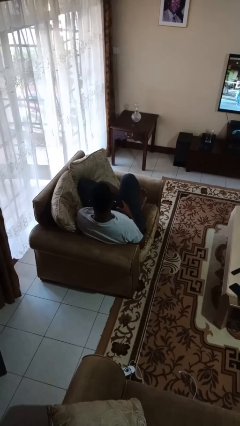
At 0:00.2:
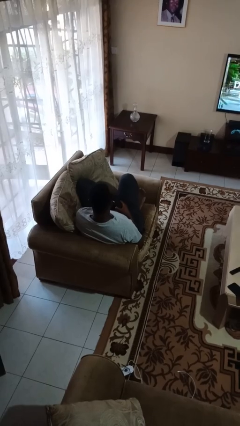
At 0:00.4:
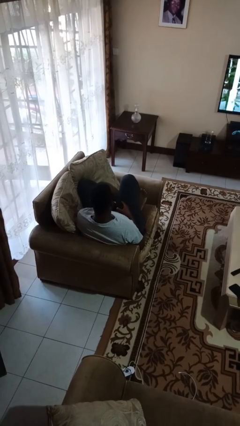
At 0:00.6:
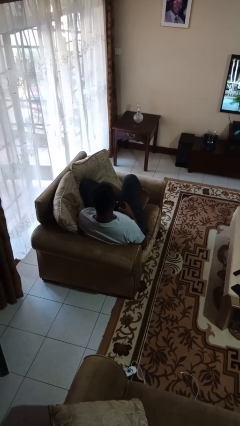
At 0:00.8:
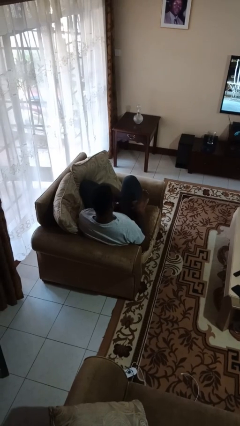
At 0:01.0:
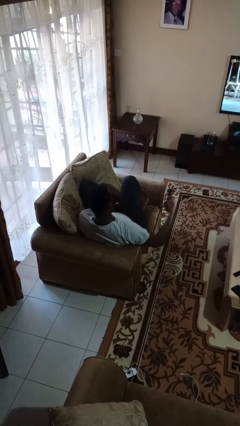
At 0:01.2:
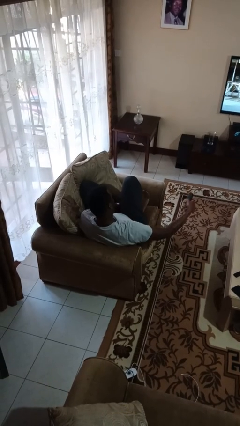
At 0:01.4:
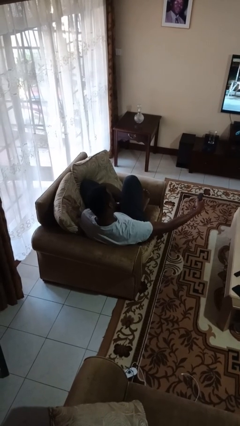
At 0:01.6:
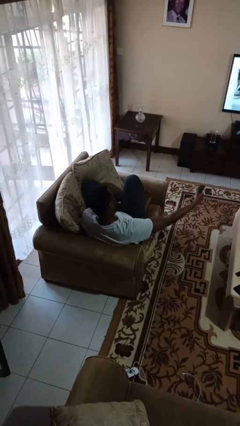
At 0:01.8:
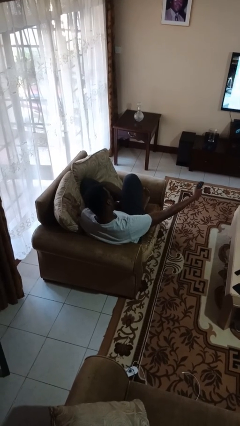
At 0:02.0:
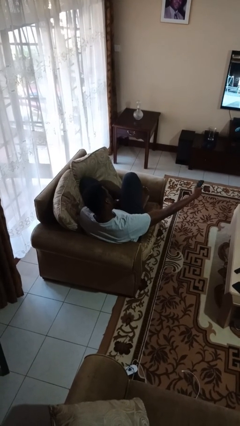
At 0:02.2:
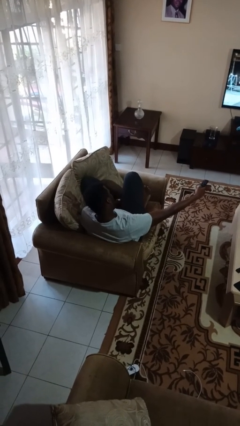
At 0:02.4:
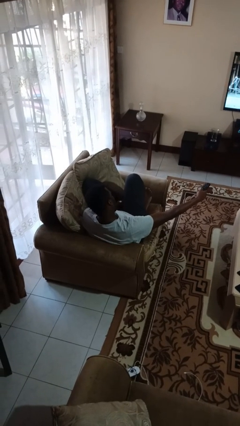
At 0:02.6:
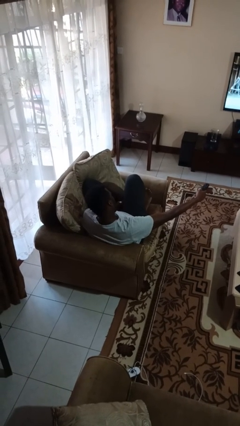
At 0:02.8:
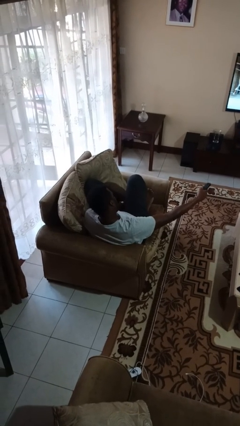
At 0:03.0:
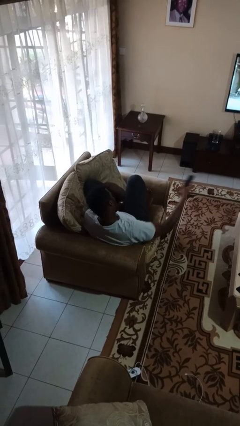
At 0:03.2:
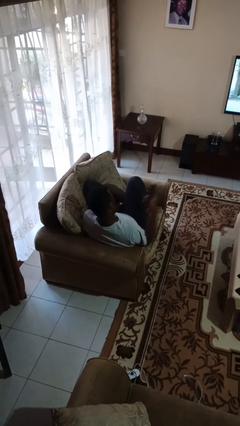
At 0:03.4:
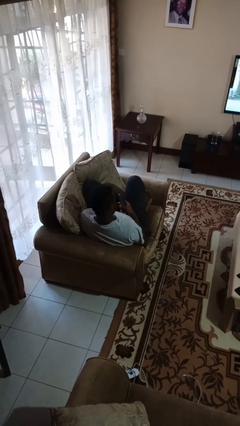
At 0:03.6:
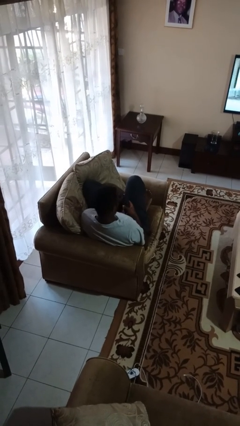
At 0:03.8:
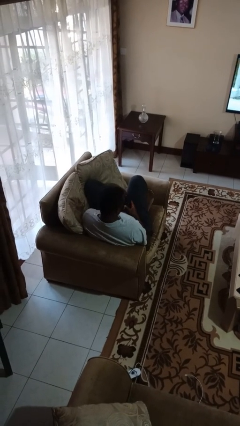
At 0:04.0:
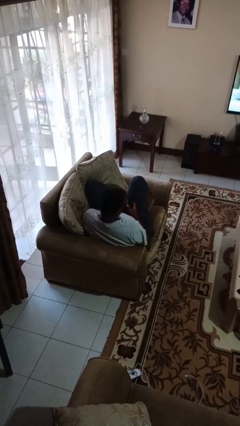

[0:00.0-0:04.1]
person uses television remote

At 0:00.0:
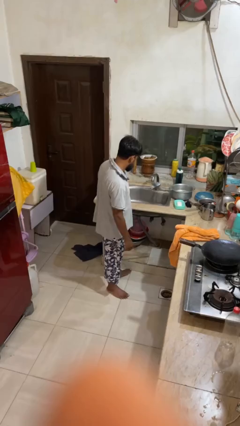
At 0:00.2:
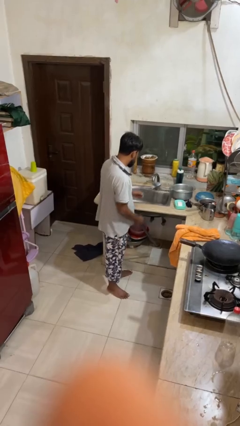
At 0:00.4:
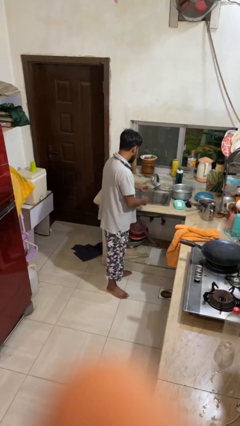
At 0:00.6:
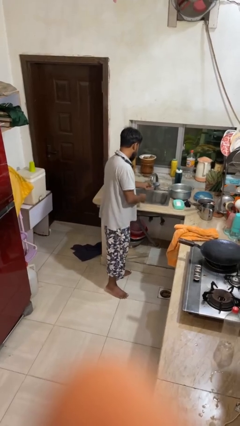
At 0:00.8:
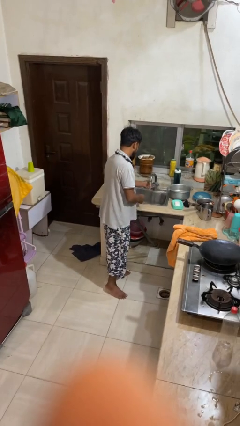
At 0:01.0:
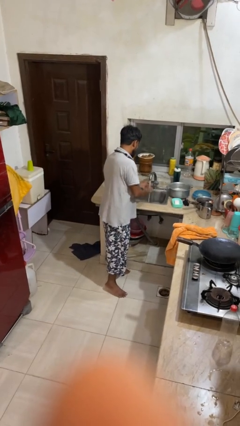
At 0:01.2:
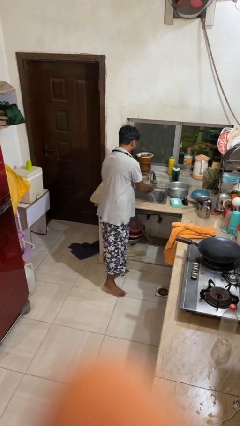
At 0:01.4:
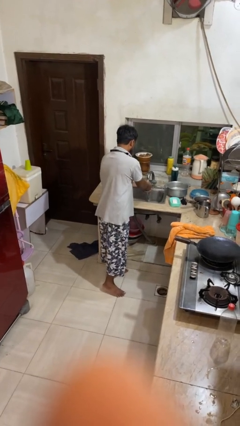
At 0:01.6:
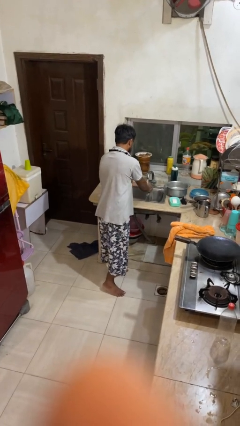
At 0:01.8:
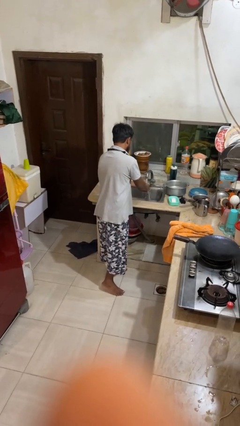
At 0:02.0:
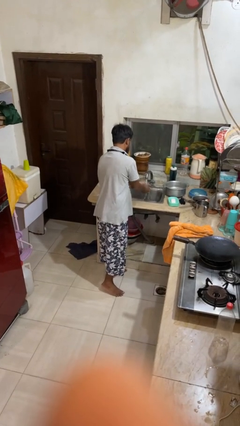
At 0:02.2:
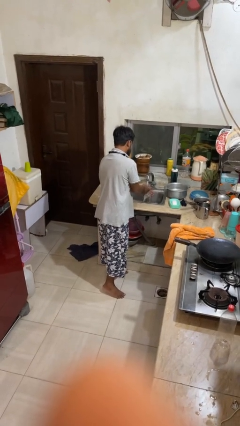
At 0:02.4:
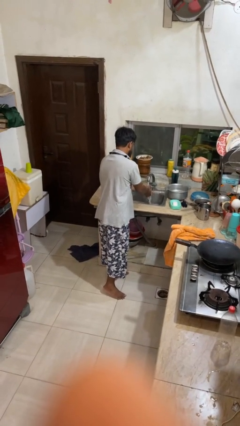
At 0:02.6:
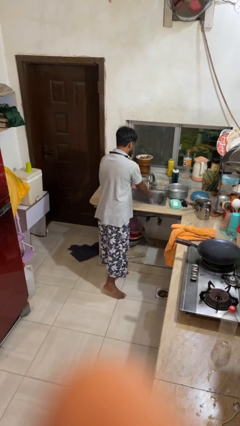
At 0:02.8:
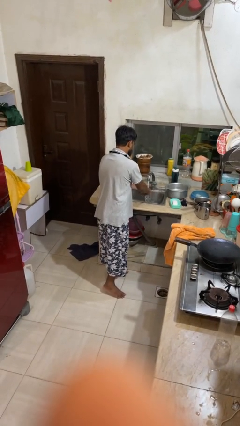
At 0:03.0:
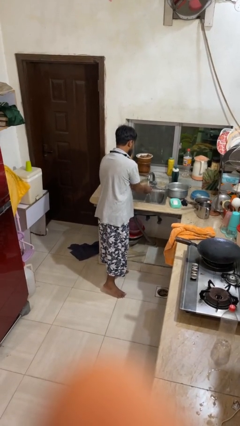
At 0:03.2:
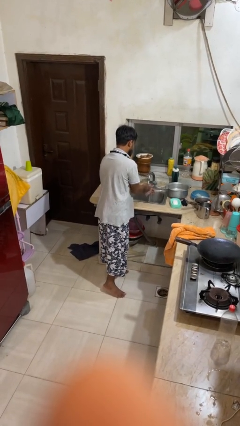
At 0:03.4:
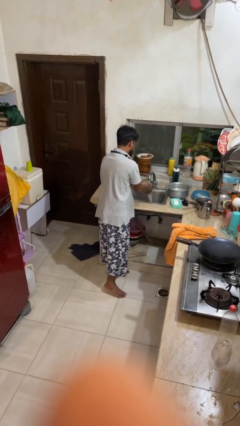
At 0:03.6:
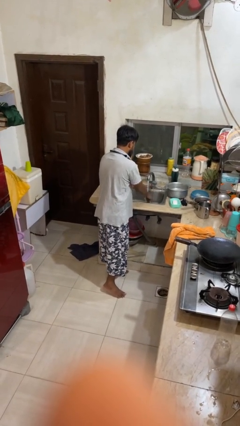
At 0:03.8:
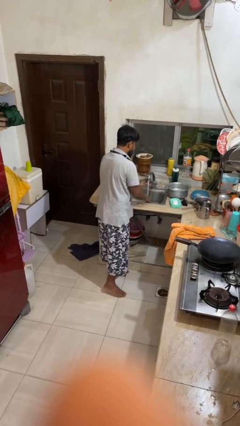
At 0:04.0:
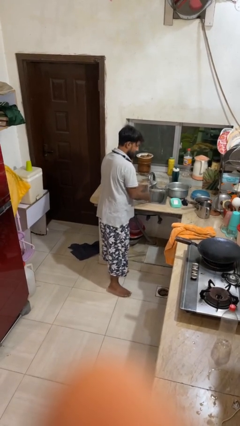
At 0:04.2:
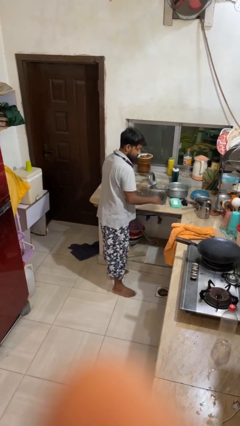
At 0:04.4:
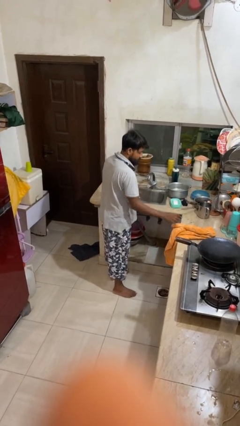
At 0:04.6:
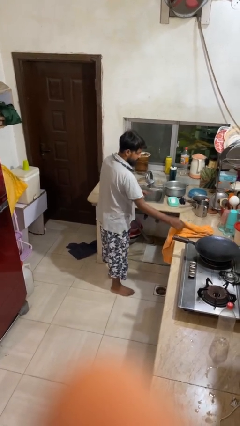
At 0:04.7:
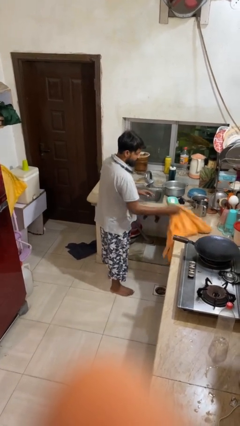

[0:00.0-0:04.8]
person washes hands

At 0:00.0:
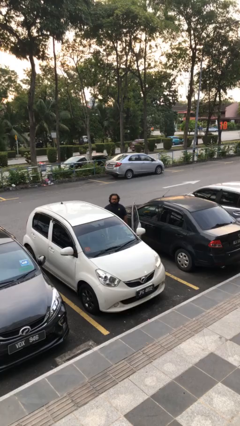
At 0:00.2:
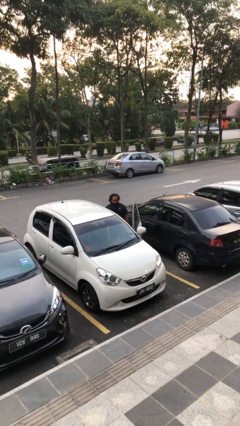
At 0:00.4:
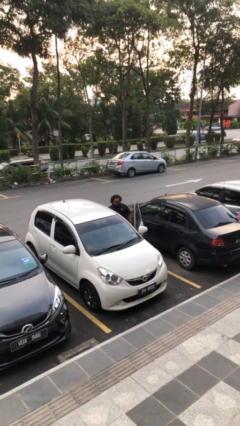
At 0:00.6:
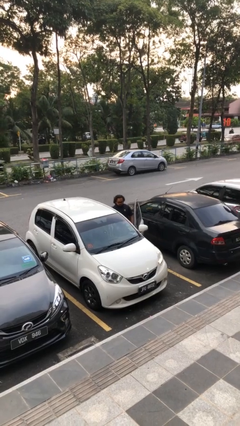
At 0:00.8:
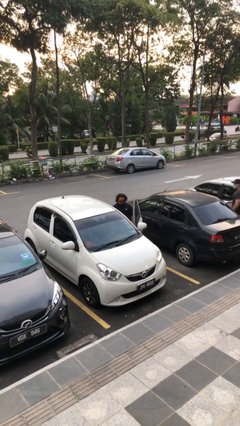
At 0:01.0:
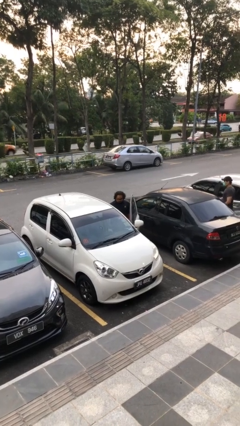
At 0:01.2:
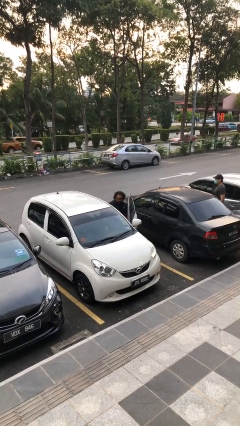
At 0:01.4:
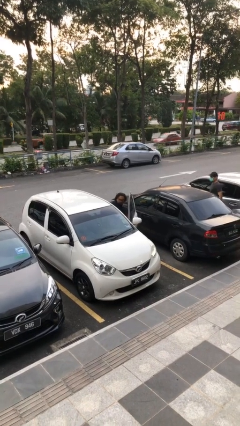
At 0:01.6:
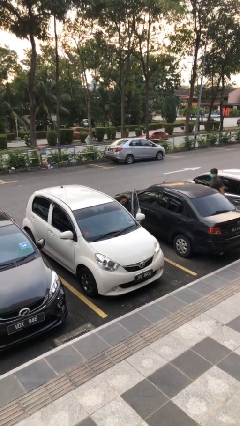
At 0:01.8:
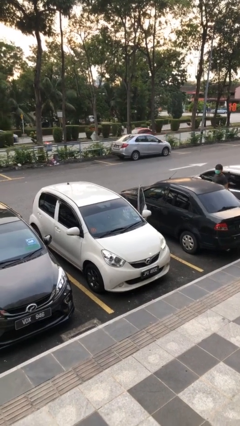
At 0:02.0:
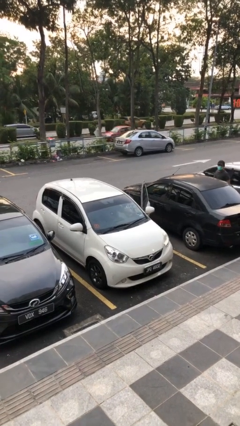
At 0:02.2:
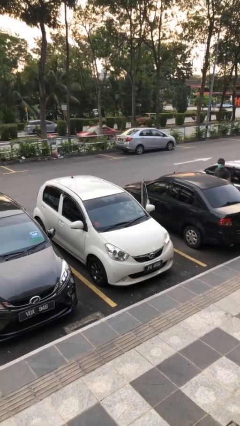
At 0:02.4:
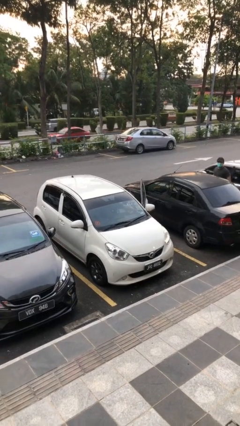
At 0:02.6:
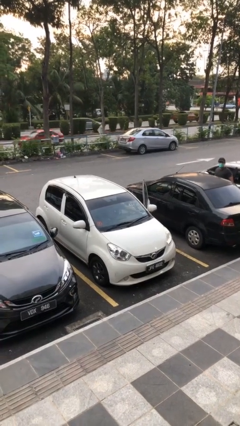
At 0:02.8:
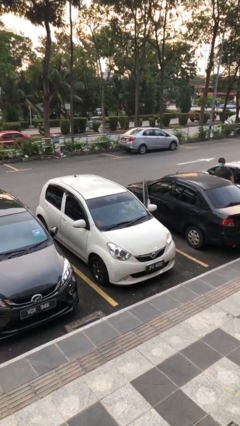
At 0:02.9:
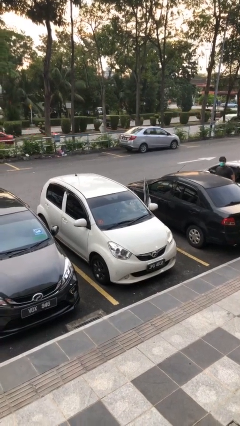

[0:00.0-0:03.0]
person enters car

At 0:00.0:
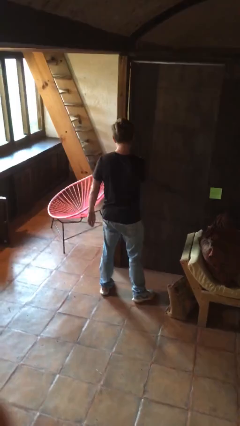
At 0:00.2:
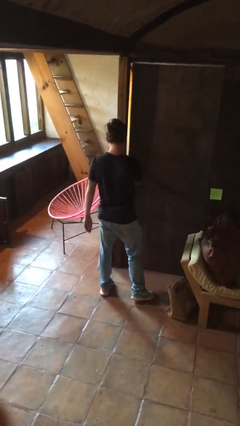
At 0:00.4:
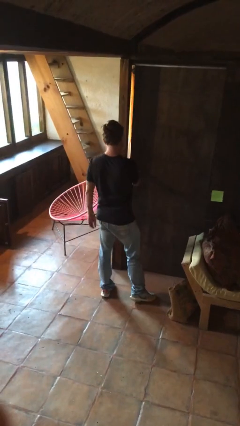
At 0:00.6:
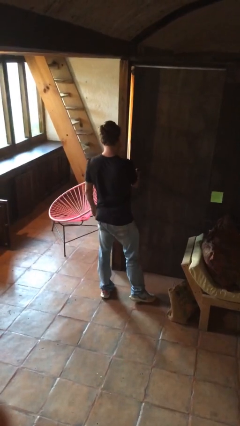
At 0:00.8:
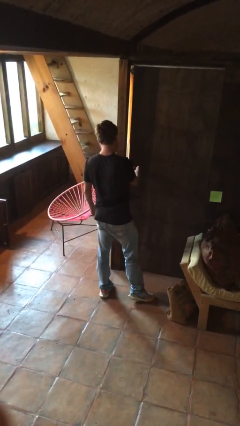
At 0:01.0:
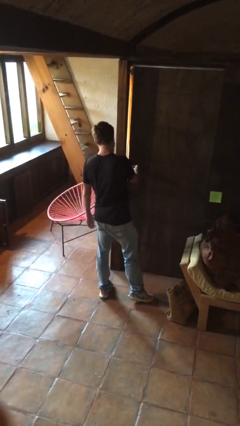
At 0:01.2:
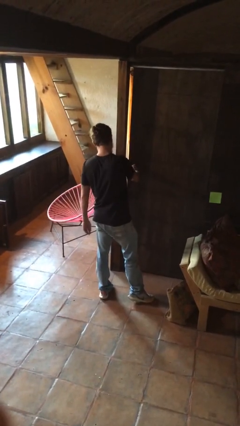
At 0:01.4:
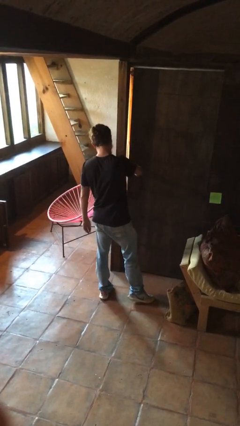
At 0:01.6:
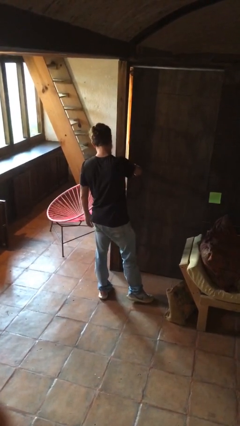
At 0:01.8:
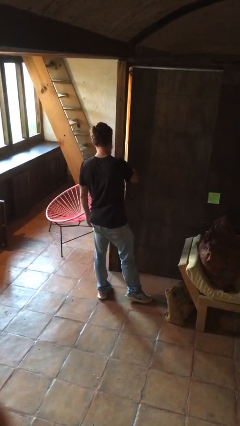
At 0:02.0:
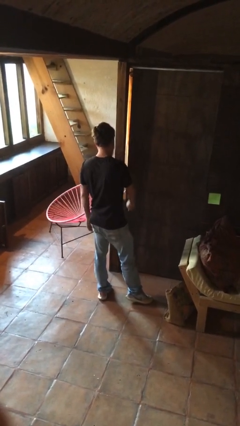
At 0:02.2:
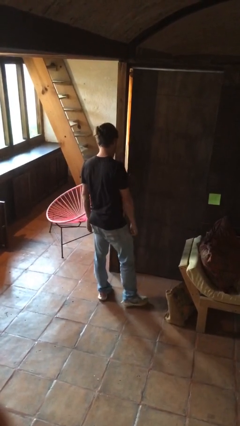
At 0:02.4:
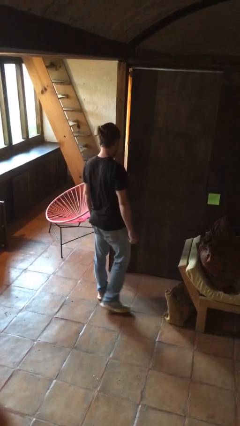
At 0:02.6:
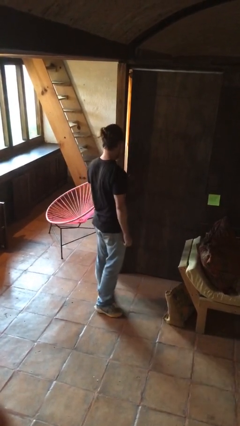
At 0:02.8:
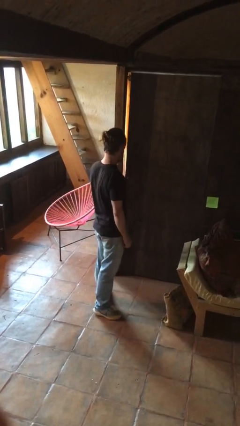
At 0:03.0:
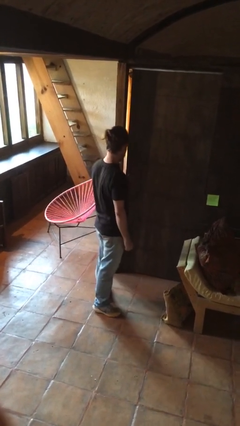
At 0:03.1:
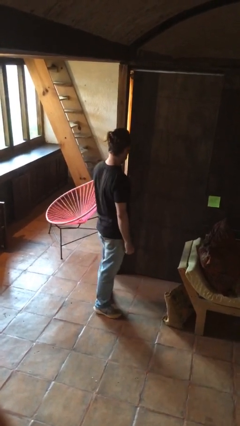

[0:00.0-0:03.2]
person locks door with keys

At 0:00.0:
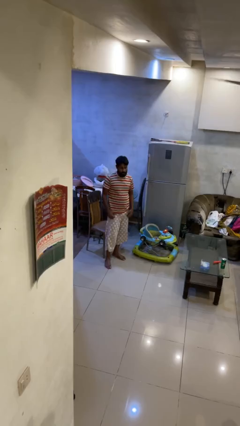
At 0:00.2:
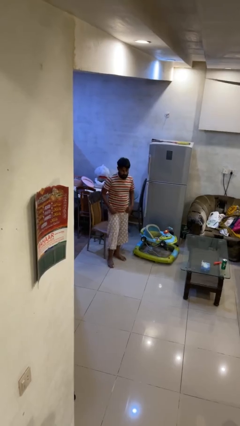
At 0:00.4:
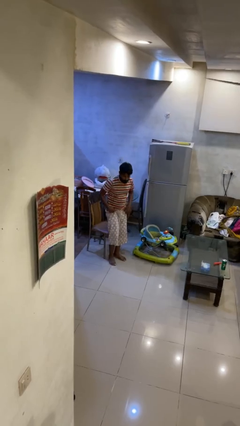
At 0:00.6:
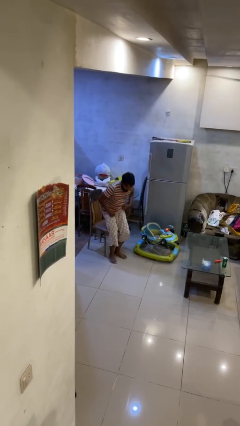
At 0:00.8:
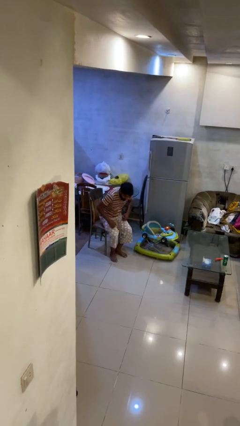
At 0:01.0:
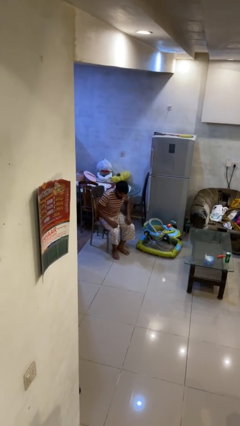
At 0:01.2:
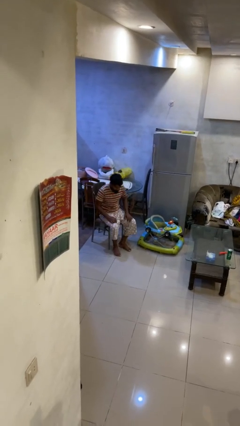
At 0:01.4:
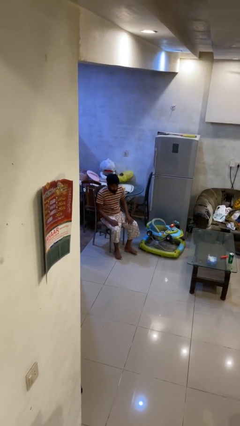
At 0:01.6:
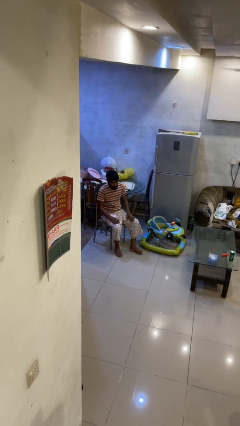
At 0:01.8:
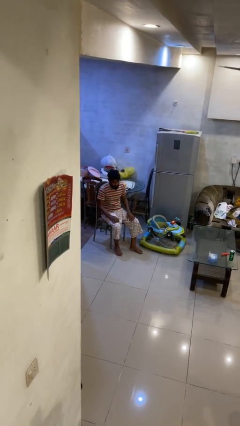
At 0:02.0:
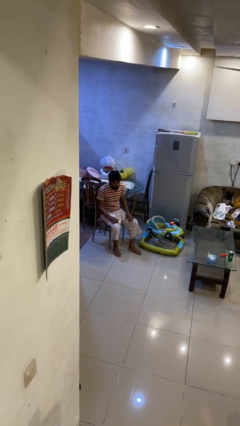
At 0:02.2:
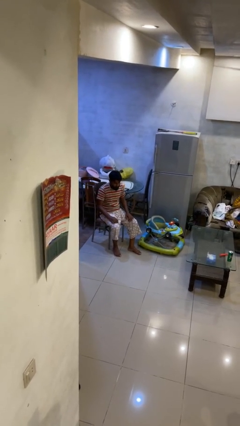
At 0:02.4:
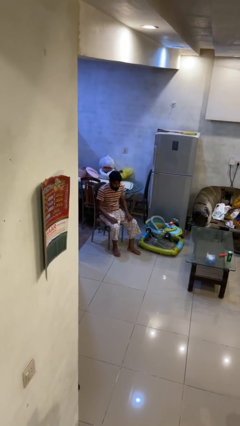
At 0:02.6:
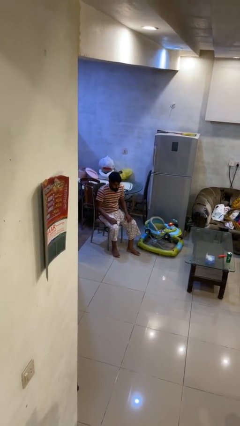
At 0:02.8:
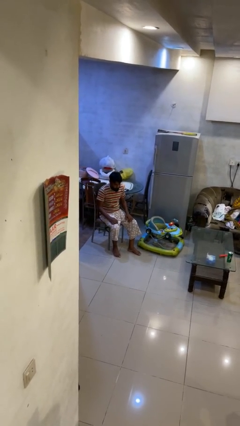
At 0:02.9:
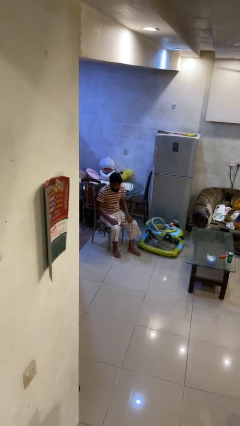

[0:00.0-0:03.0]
person sits down
